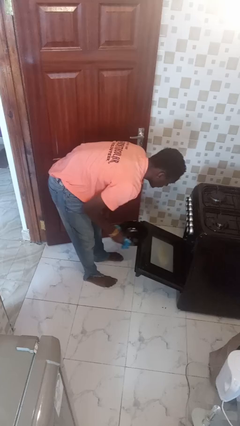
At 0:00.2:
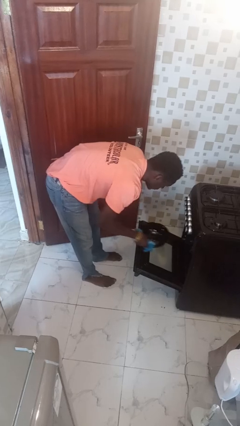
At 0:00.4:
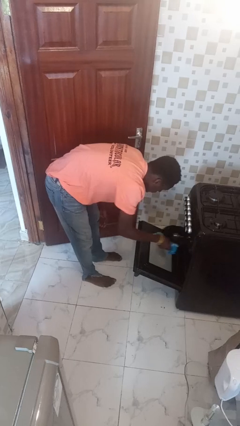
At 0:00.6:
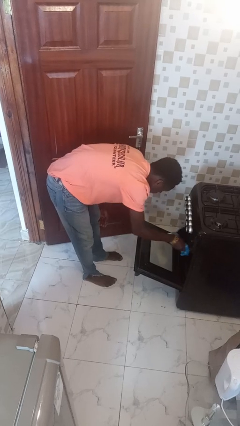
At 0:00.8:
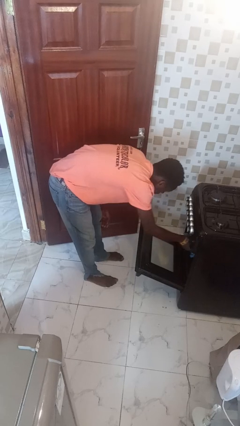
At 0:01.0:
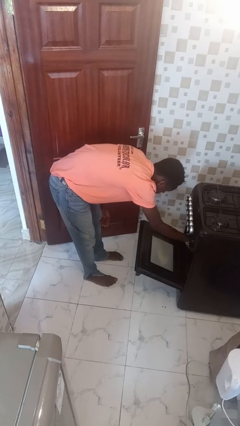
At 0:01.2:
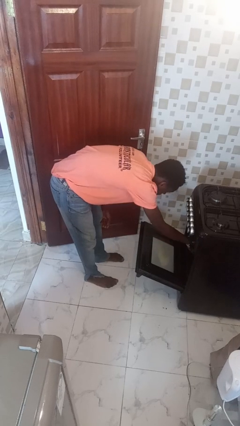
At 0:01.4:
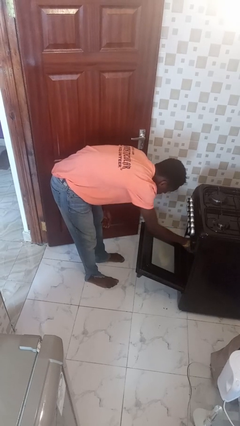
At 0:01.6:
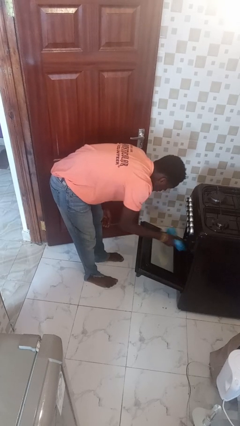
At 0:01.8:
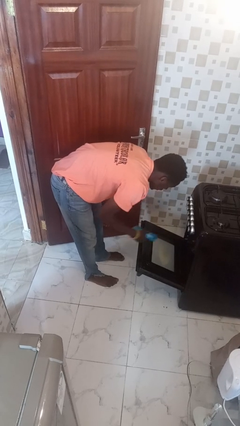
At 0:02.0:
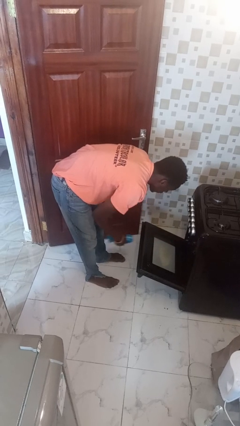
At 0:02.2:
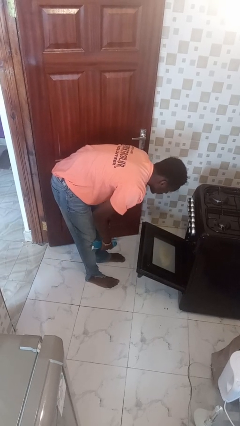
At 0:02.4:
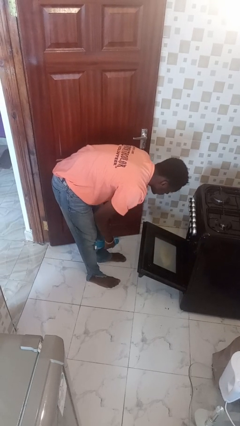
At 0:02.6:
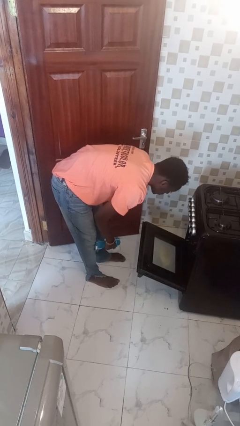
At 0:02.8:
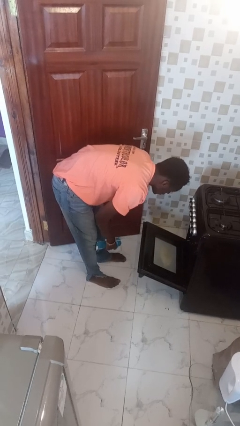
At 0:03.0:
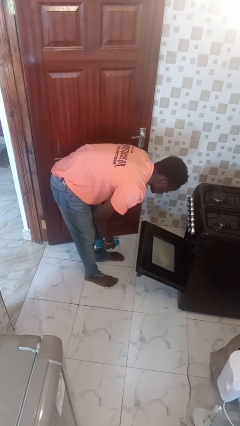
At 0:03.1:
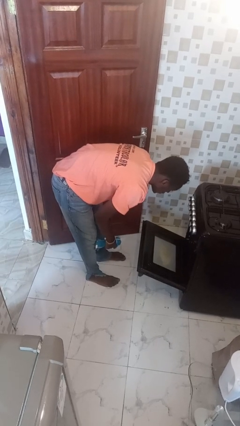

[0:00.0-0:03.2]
person puts object into oven

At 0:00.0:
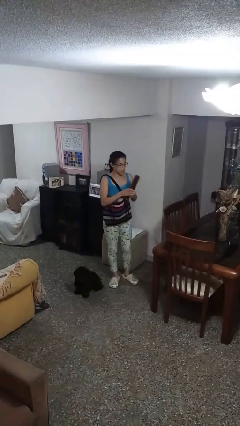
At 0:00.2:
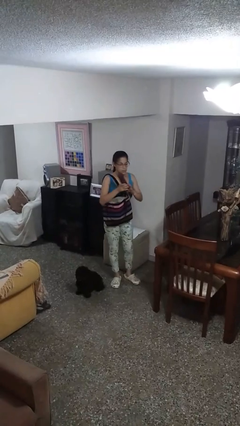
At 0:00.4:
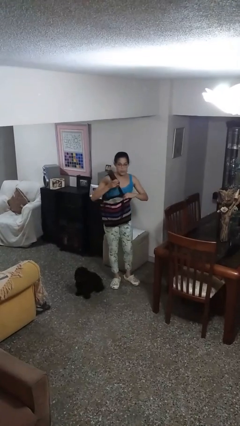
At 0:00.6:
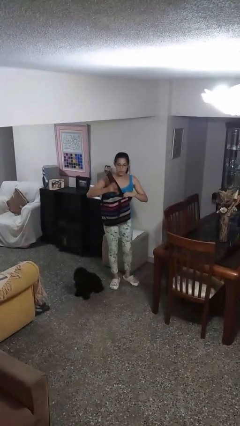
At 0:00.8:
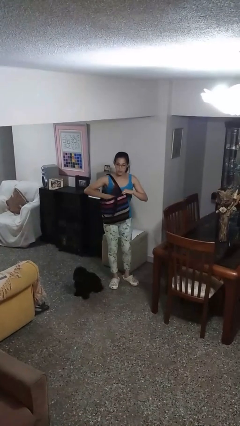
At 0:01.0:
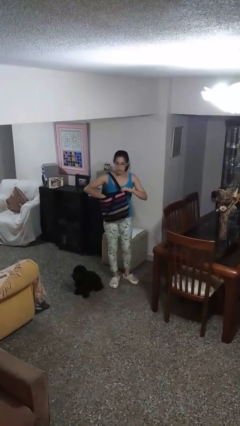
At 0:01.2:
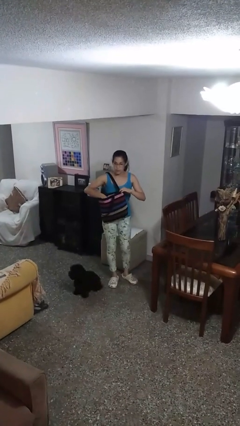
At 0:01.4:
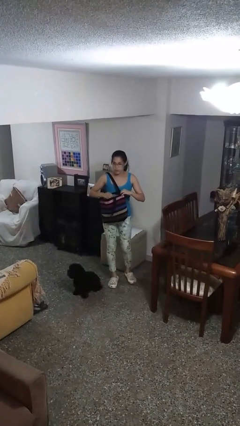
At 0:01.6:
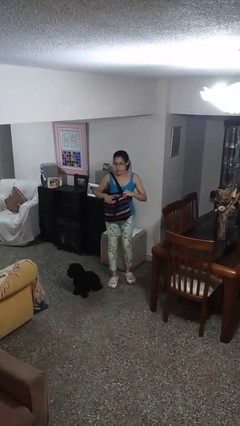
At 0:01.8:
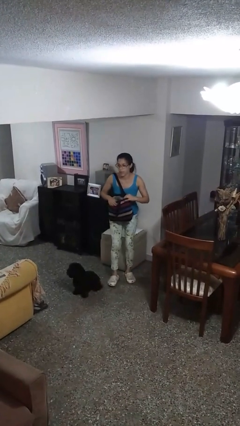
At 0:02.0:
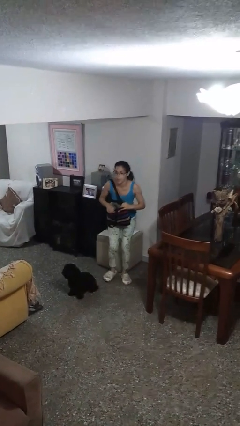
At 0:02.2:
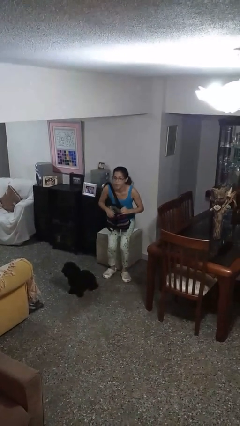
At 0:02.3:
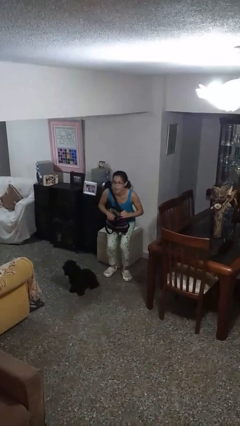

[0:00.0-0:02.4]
person puts object into purse

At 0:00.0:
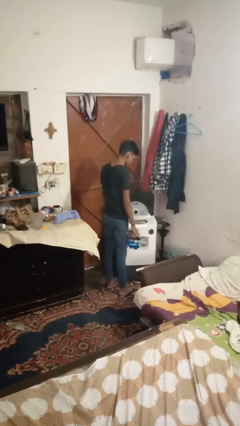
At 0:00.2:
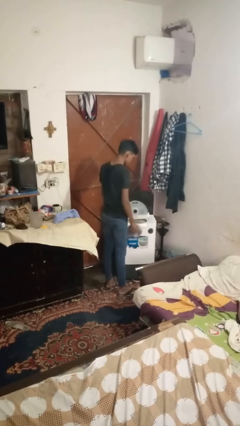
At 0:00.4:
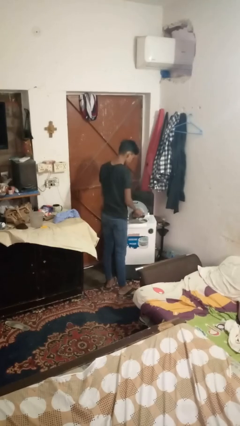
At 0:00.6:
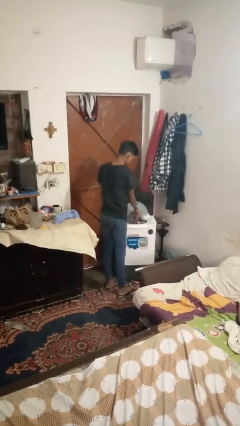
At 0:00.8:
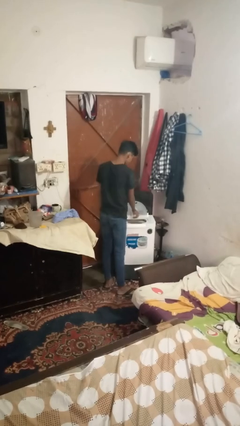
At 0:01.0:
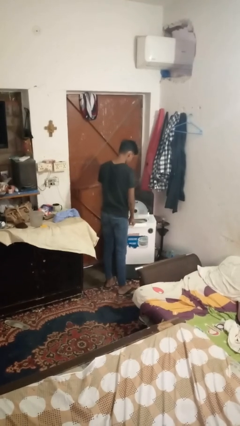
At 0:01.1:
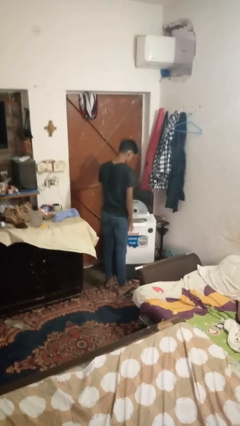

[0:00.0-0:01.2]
person loads clotheswasher

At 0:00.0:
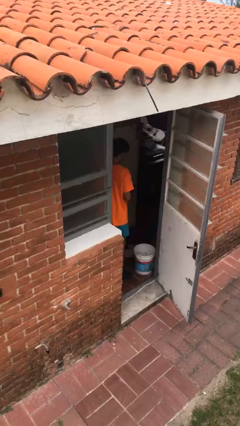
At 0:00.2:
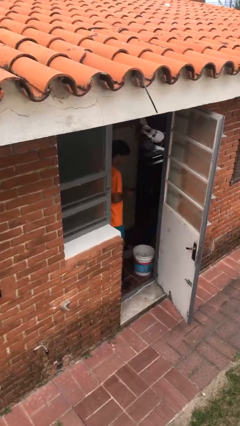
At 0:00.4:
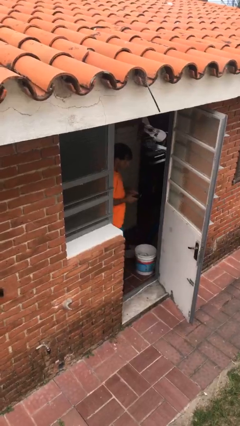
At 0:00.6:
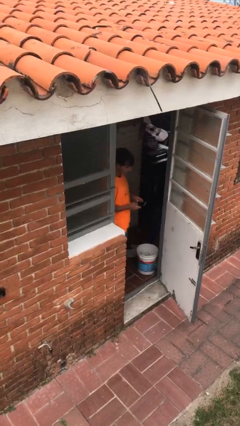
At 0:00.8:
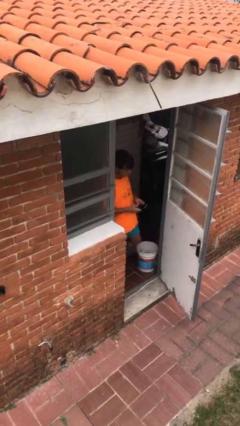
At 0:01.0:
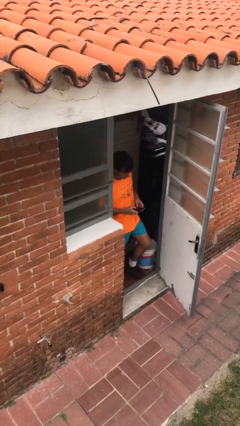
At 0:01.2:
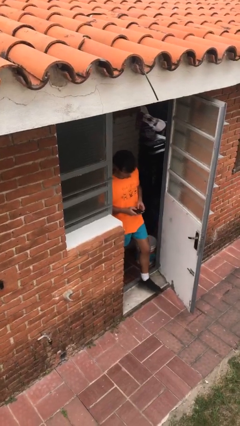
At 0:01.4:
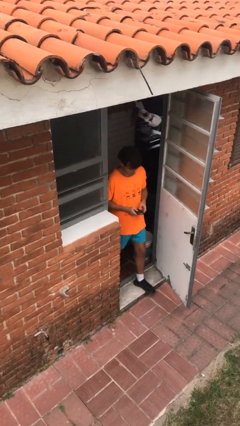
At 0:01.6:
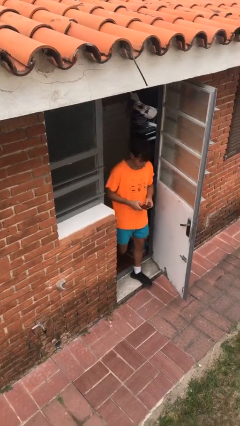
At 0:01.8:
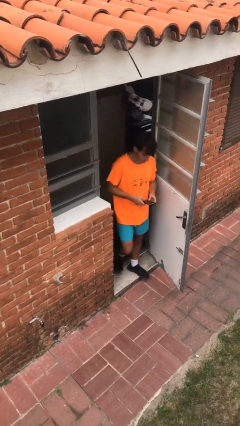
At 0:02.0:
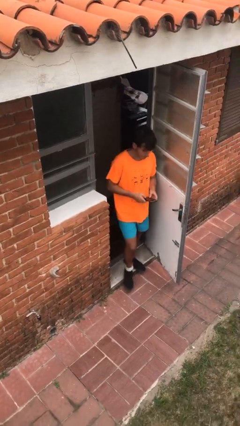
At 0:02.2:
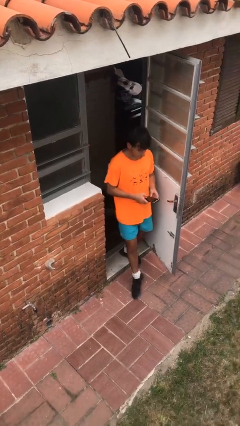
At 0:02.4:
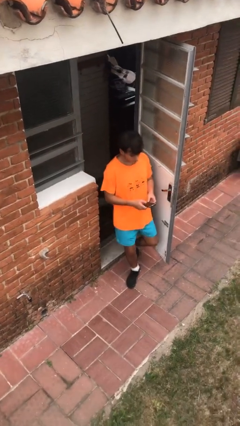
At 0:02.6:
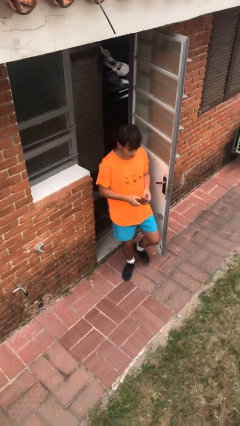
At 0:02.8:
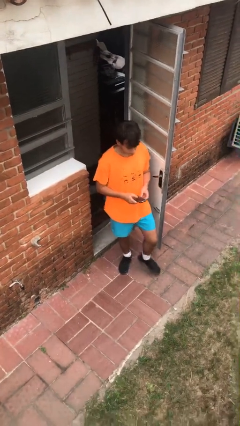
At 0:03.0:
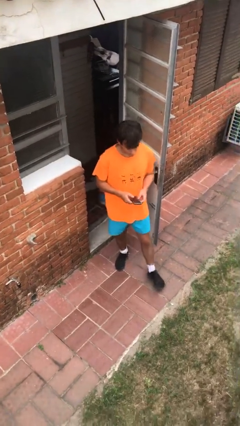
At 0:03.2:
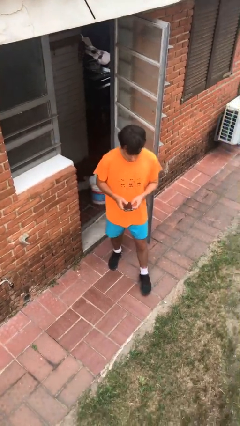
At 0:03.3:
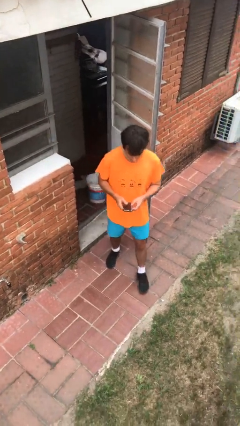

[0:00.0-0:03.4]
person enters scene through structure

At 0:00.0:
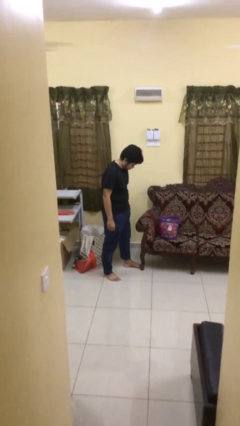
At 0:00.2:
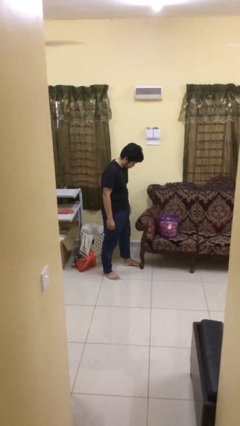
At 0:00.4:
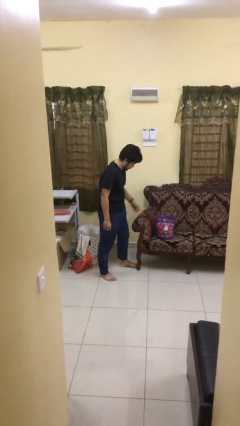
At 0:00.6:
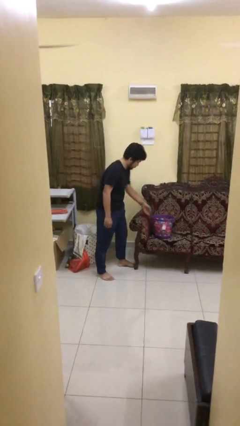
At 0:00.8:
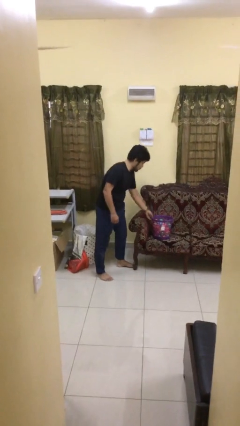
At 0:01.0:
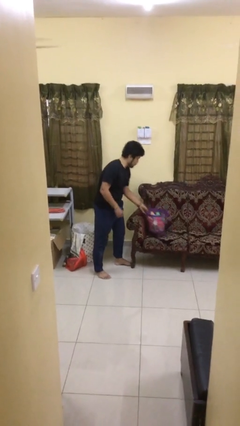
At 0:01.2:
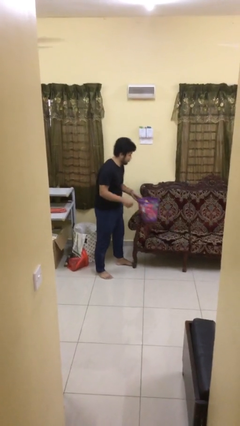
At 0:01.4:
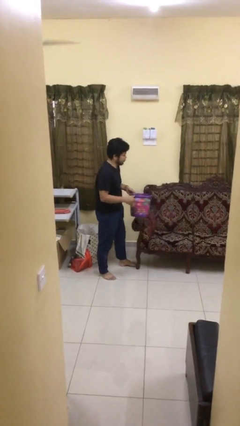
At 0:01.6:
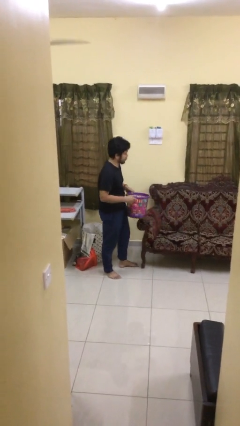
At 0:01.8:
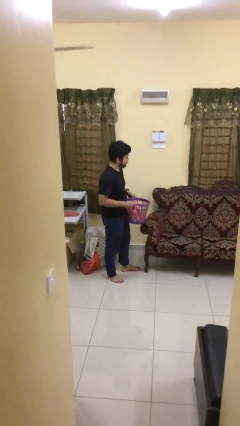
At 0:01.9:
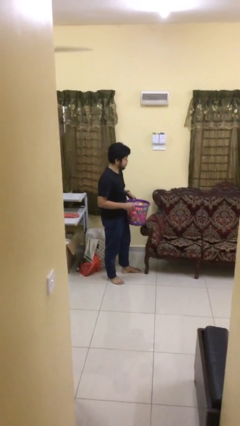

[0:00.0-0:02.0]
person picks up object from couch

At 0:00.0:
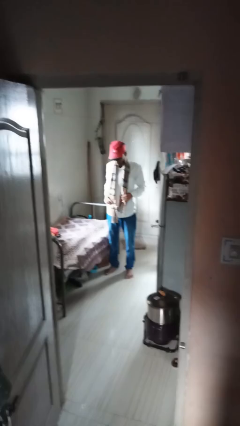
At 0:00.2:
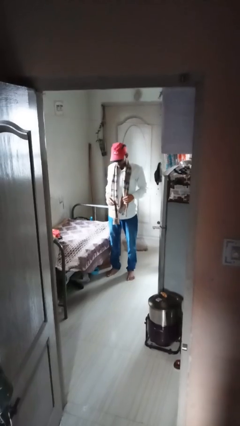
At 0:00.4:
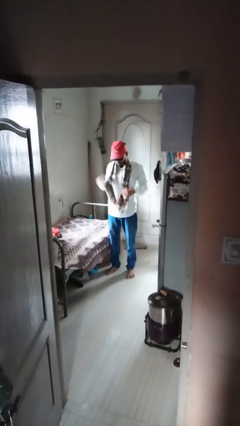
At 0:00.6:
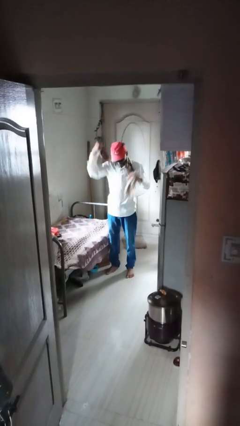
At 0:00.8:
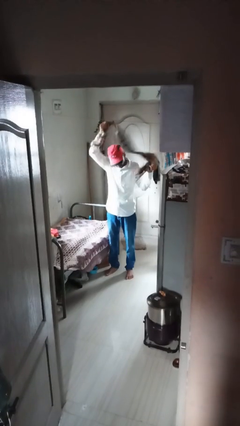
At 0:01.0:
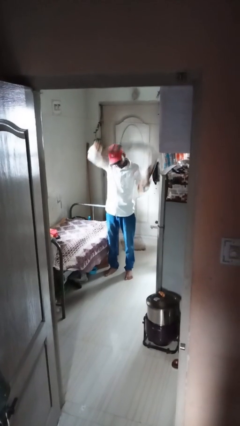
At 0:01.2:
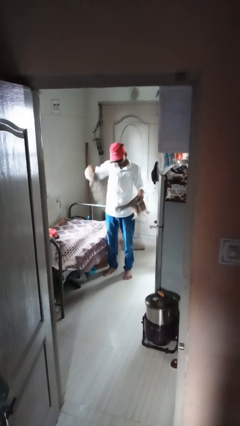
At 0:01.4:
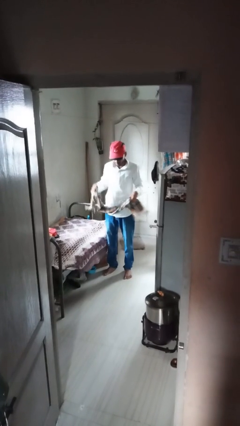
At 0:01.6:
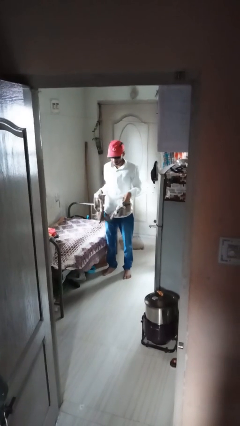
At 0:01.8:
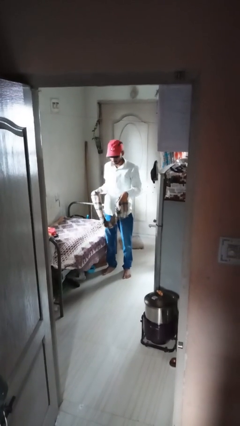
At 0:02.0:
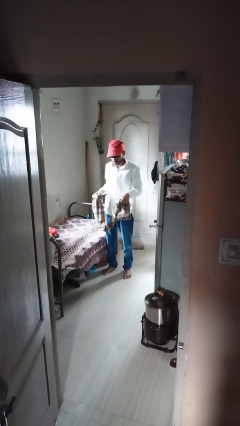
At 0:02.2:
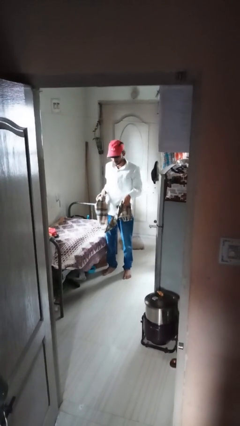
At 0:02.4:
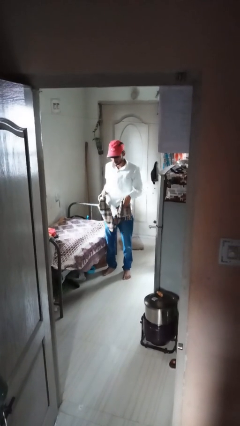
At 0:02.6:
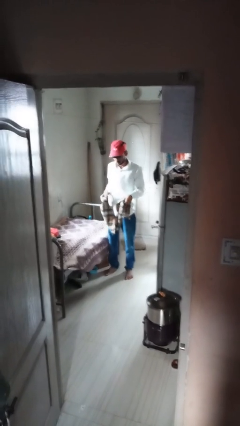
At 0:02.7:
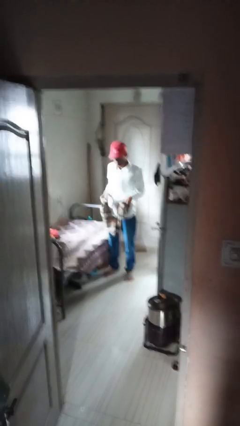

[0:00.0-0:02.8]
person takes off scarf

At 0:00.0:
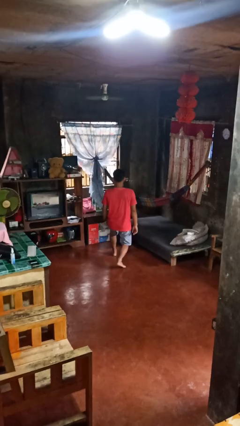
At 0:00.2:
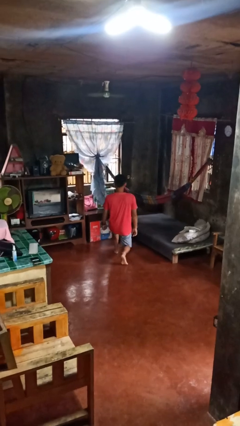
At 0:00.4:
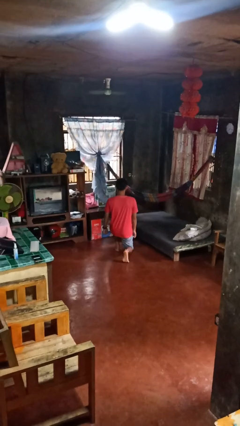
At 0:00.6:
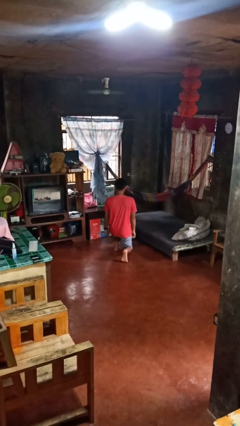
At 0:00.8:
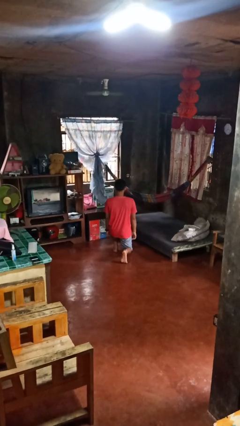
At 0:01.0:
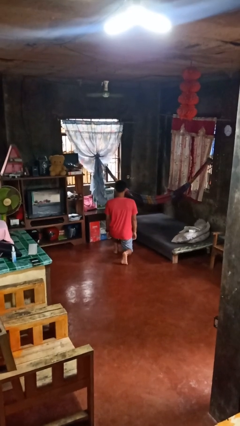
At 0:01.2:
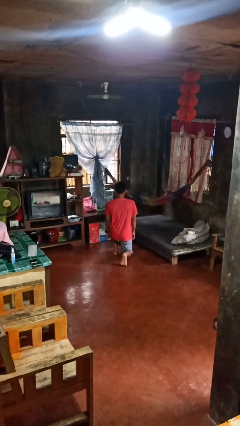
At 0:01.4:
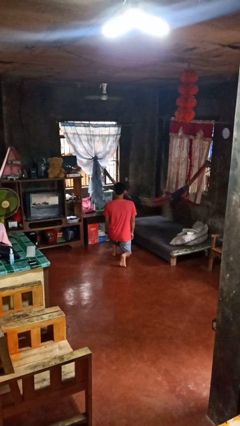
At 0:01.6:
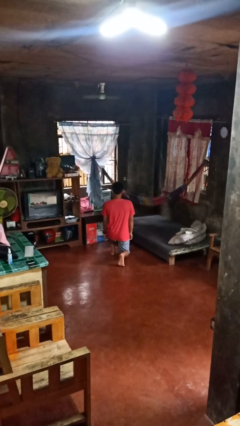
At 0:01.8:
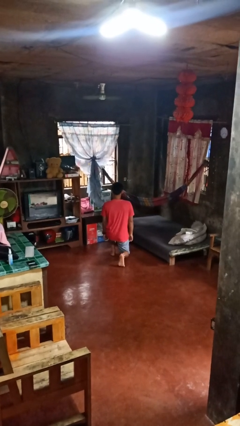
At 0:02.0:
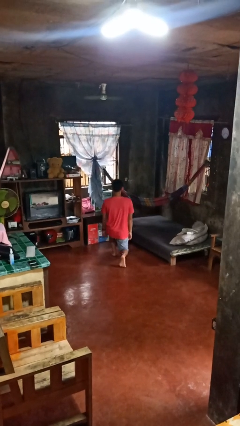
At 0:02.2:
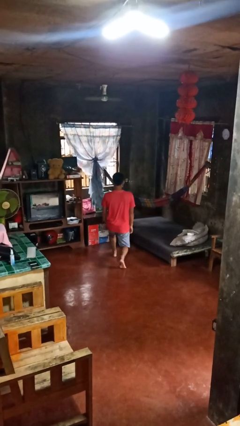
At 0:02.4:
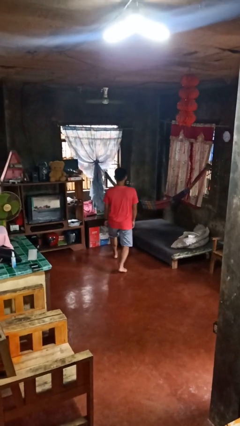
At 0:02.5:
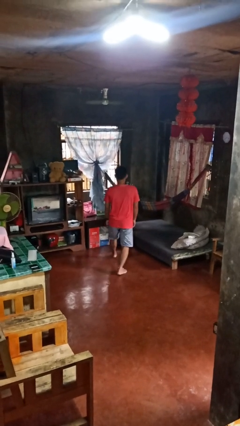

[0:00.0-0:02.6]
person exercises with lunges
